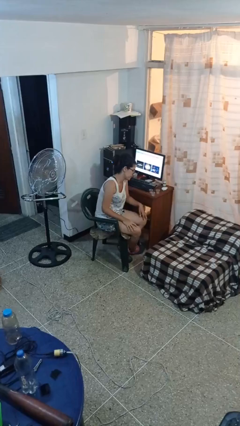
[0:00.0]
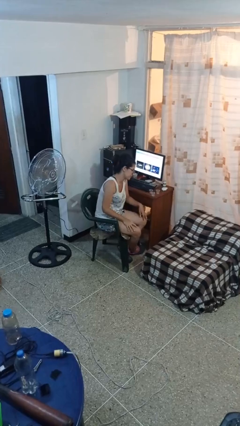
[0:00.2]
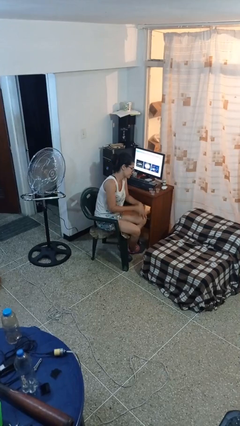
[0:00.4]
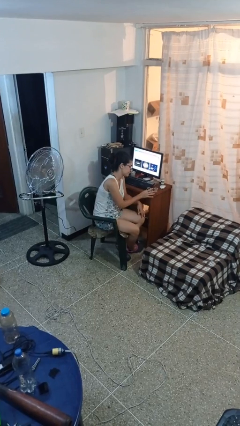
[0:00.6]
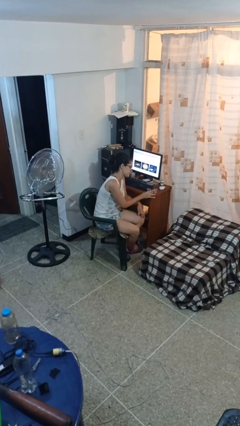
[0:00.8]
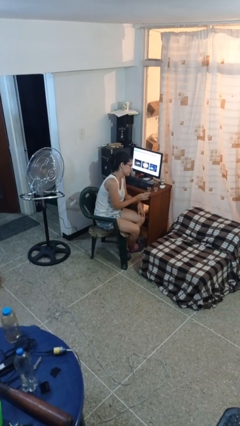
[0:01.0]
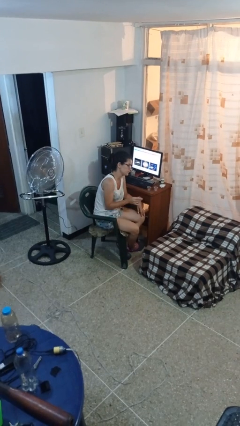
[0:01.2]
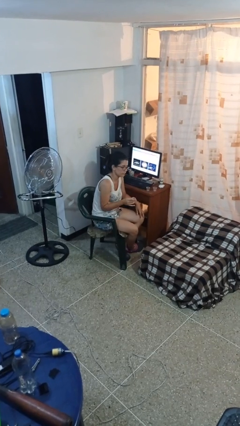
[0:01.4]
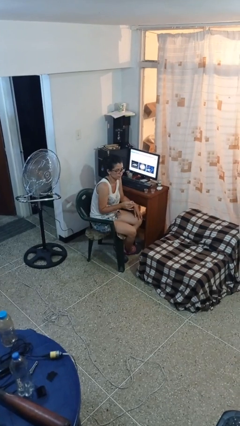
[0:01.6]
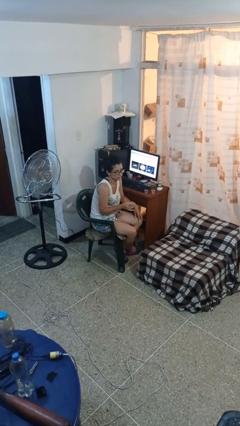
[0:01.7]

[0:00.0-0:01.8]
person picks up object from table

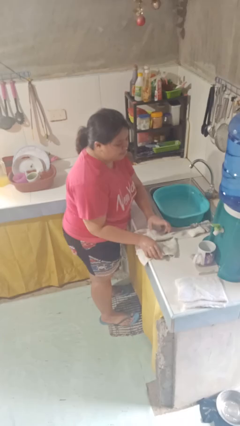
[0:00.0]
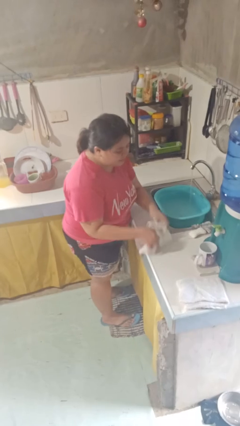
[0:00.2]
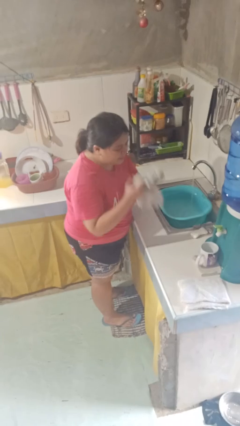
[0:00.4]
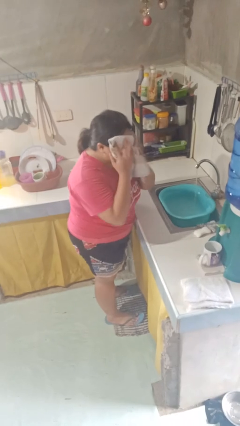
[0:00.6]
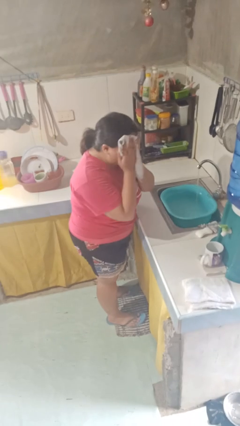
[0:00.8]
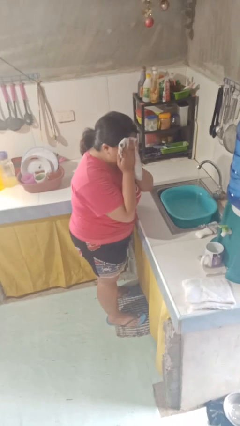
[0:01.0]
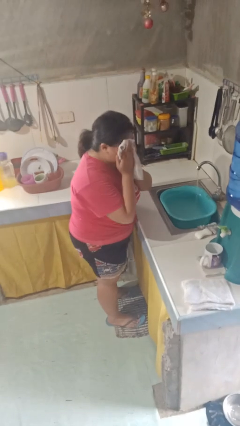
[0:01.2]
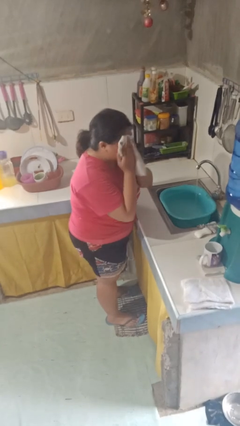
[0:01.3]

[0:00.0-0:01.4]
person dries face with towel

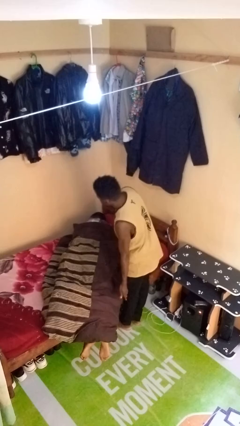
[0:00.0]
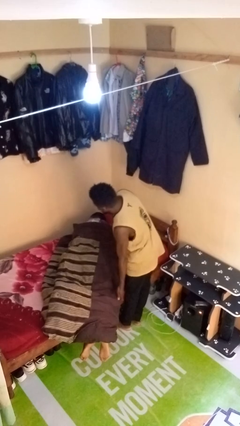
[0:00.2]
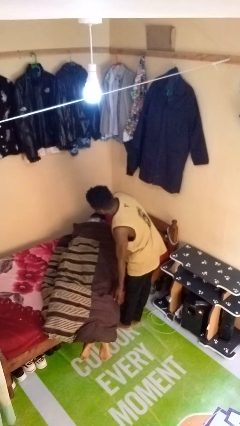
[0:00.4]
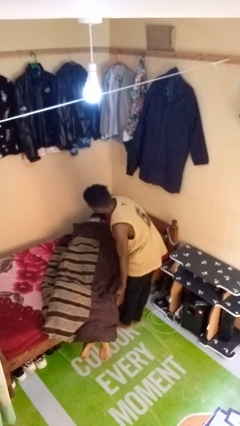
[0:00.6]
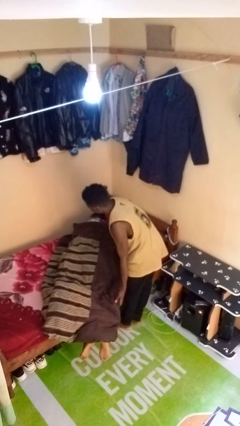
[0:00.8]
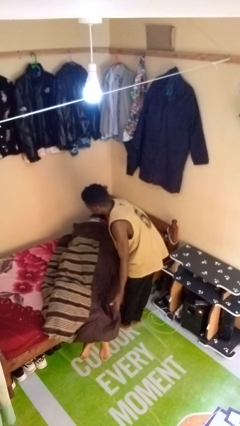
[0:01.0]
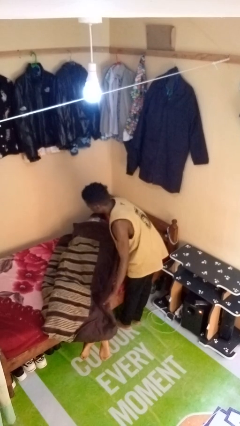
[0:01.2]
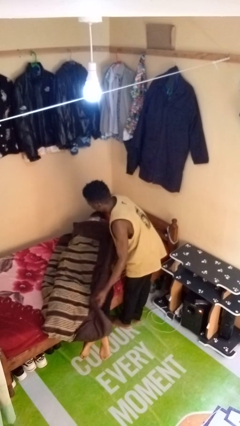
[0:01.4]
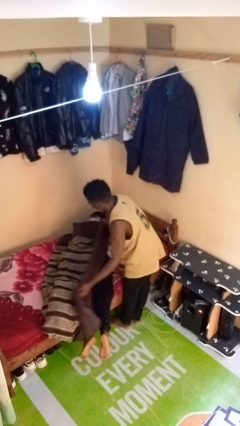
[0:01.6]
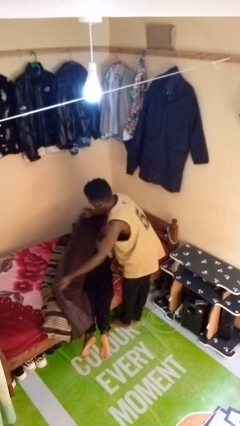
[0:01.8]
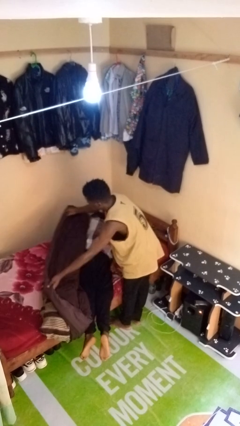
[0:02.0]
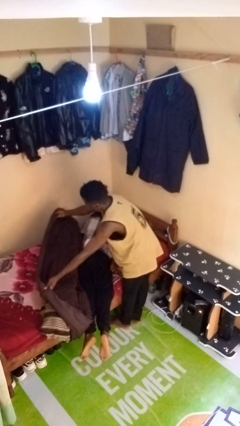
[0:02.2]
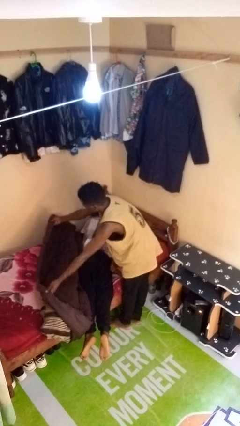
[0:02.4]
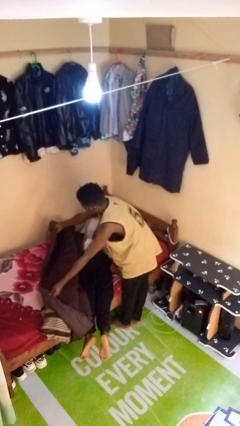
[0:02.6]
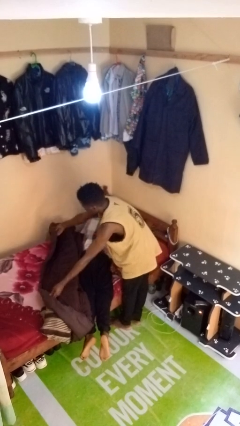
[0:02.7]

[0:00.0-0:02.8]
person uncovers friend with blanket

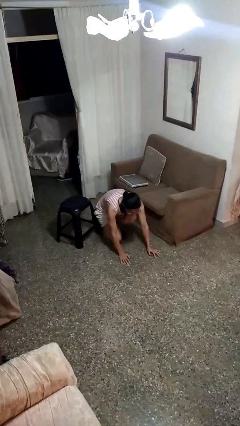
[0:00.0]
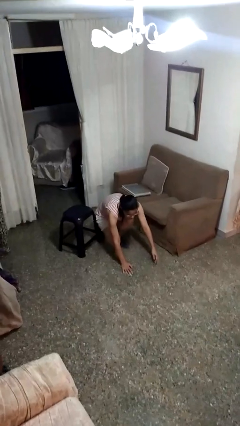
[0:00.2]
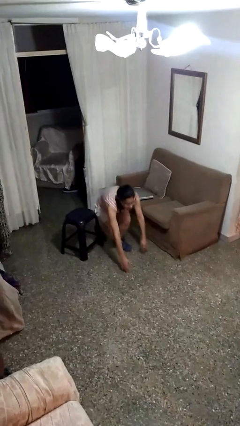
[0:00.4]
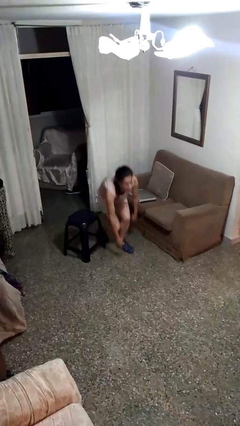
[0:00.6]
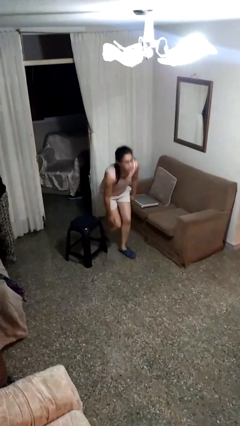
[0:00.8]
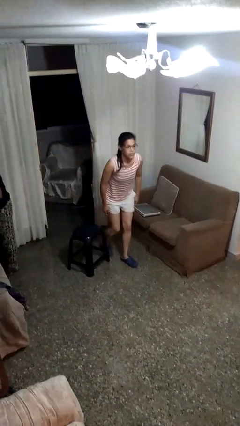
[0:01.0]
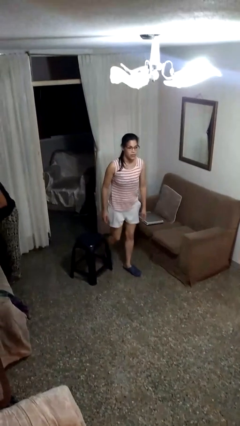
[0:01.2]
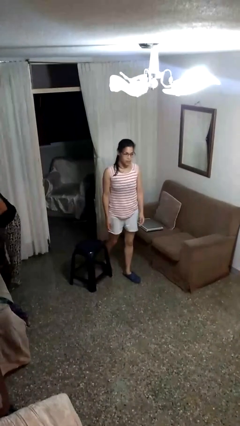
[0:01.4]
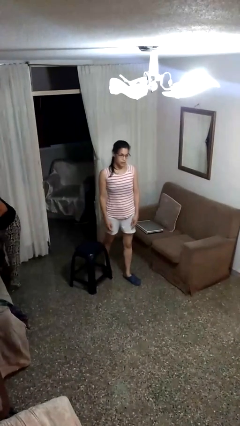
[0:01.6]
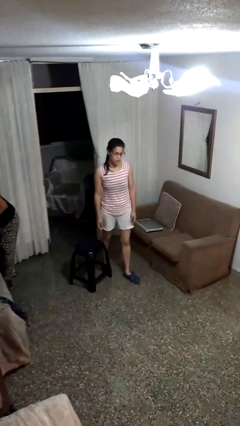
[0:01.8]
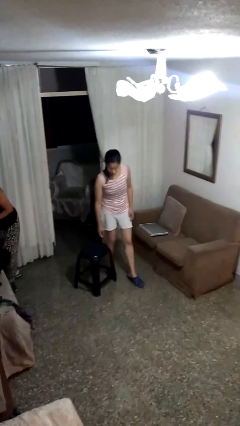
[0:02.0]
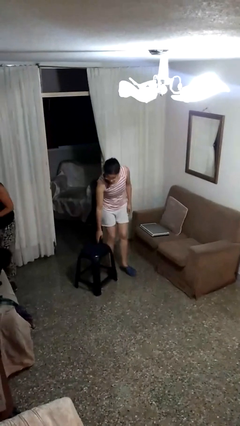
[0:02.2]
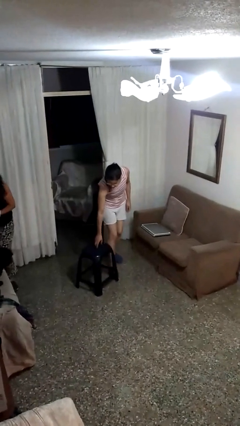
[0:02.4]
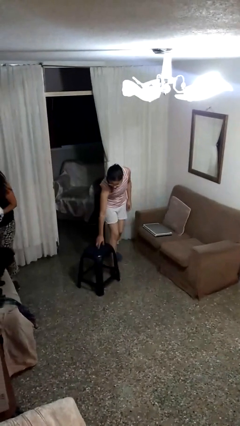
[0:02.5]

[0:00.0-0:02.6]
person stands up from floor

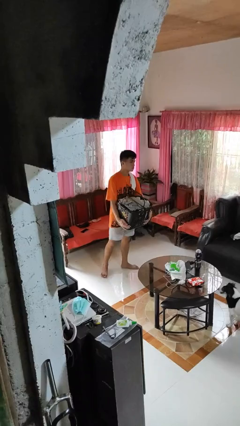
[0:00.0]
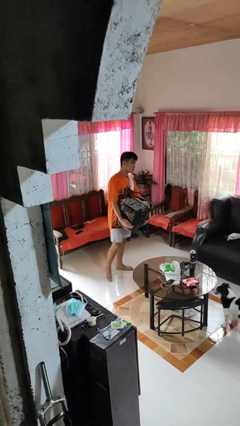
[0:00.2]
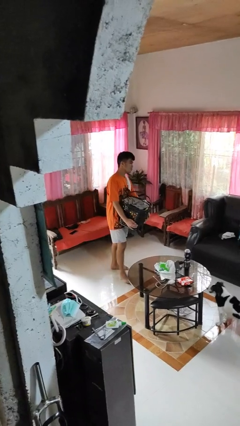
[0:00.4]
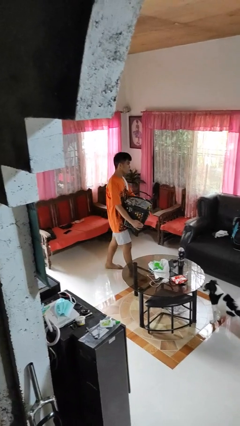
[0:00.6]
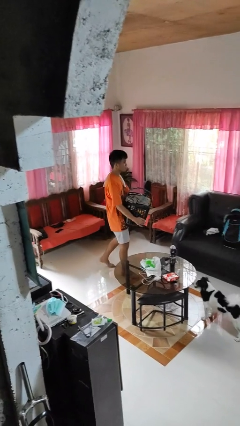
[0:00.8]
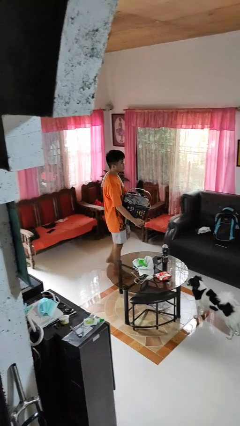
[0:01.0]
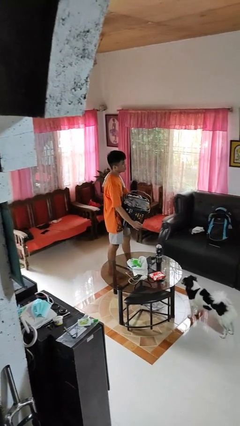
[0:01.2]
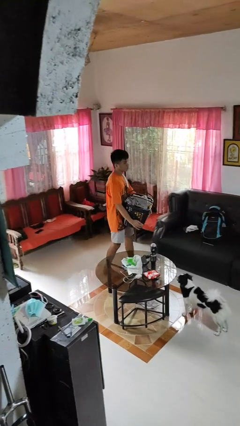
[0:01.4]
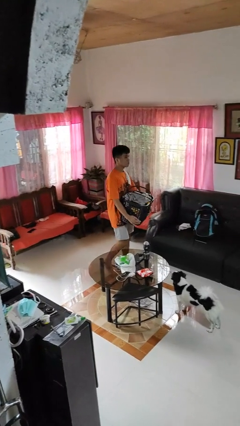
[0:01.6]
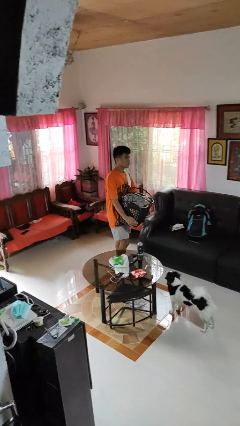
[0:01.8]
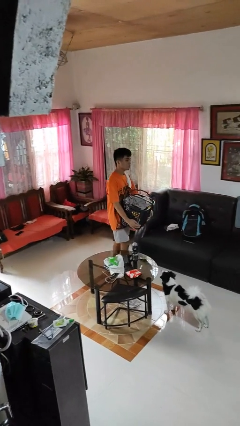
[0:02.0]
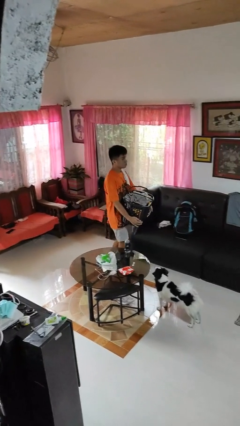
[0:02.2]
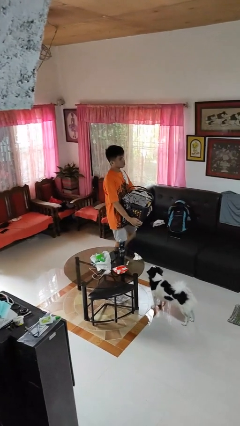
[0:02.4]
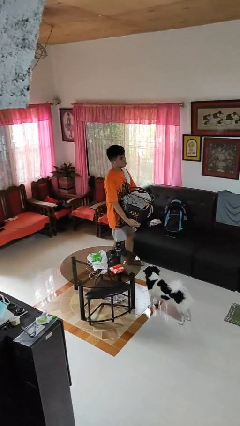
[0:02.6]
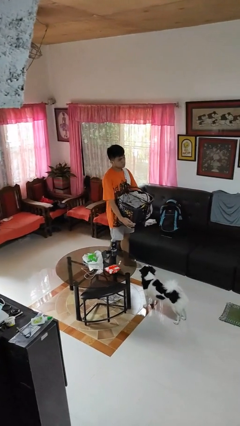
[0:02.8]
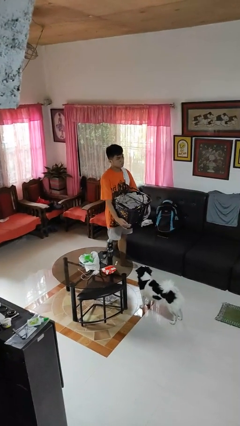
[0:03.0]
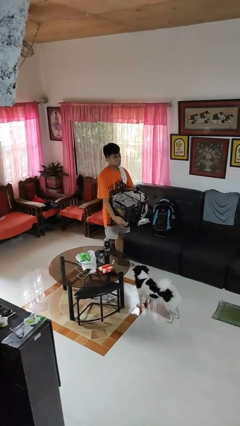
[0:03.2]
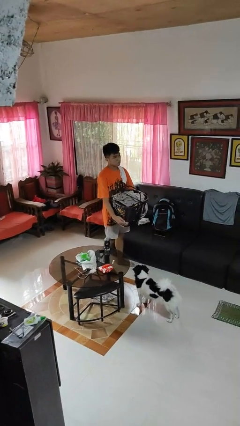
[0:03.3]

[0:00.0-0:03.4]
person carries laundry basket

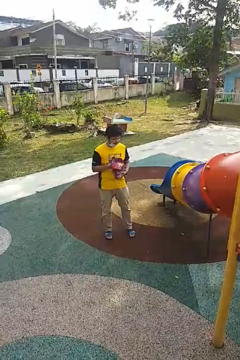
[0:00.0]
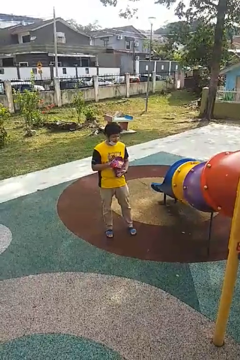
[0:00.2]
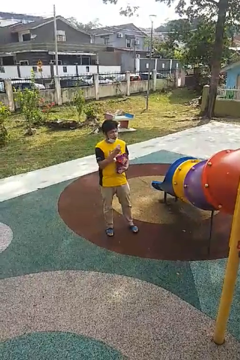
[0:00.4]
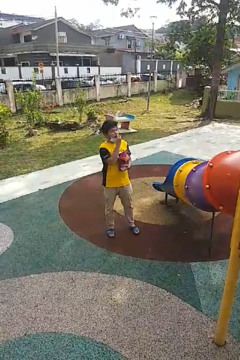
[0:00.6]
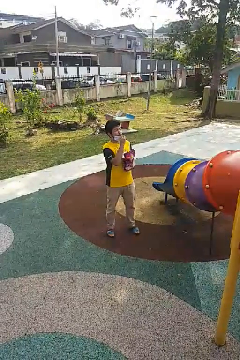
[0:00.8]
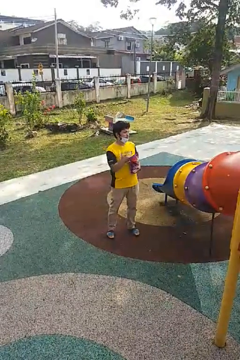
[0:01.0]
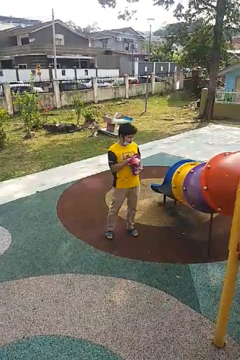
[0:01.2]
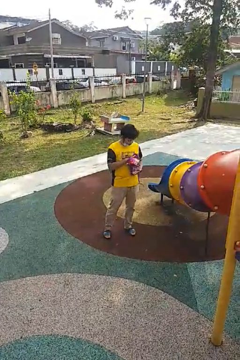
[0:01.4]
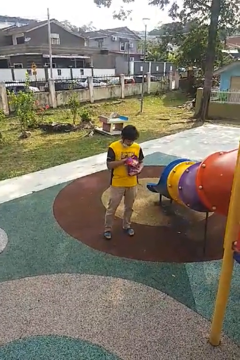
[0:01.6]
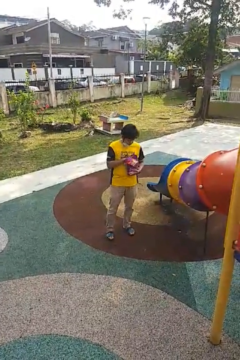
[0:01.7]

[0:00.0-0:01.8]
person eats snack from bag

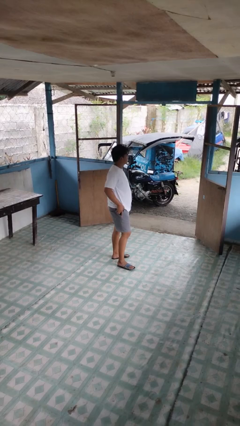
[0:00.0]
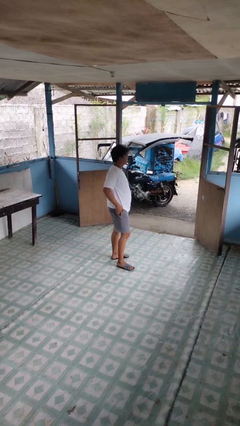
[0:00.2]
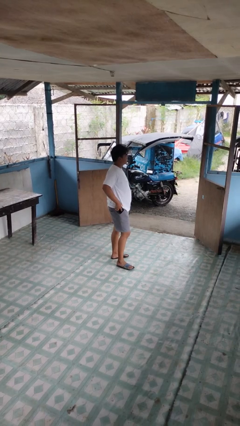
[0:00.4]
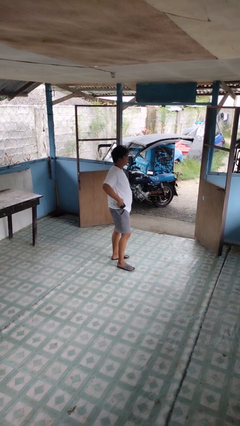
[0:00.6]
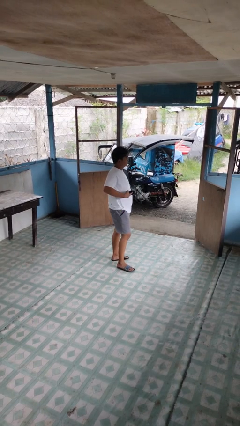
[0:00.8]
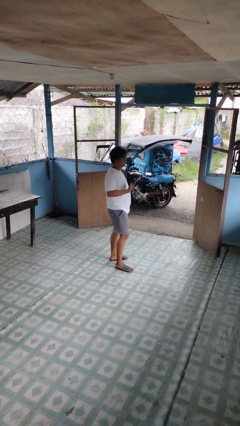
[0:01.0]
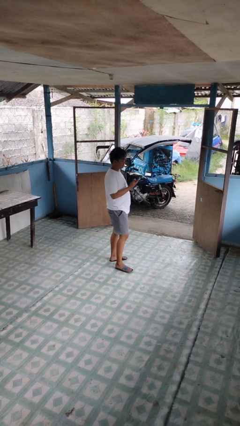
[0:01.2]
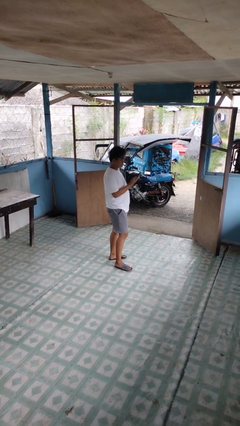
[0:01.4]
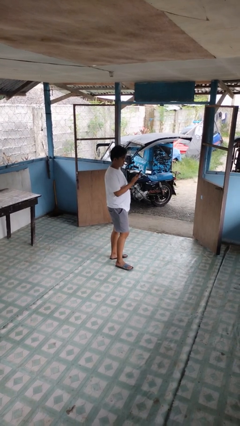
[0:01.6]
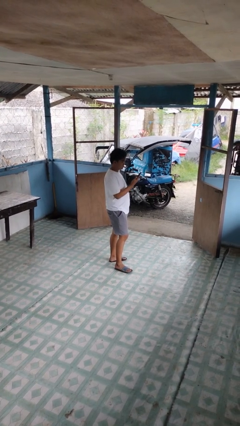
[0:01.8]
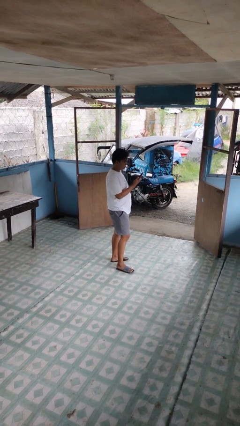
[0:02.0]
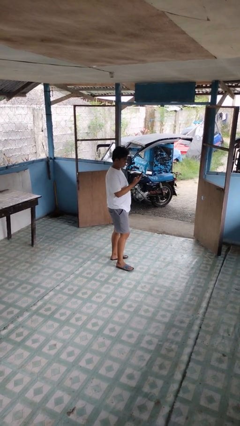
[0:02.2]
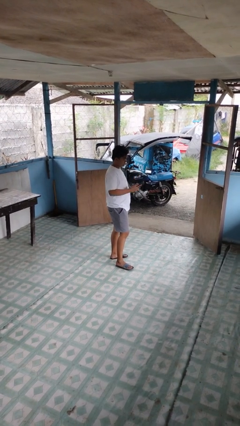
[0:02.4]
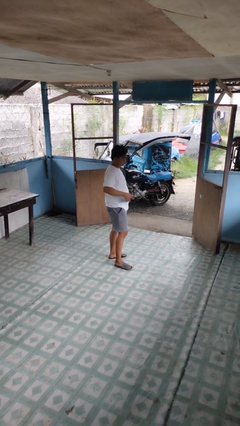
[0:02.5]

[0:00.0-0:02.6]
person takes phone from pocket

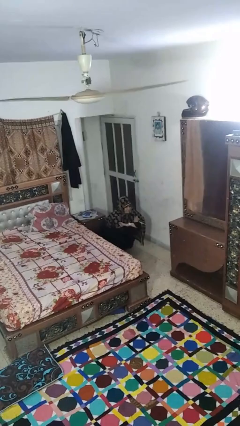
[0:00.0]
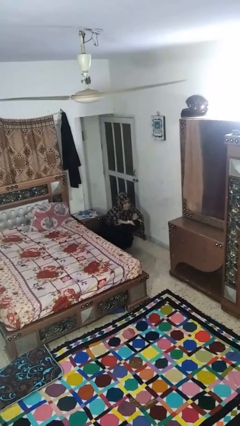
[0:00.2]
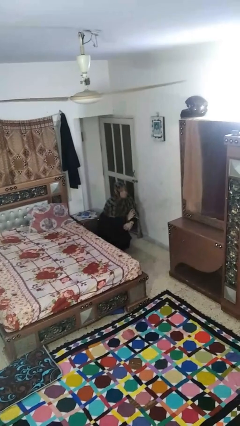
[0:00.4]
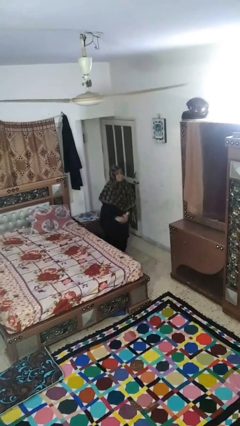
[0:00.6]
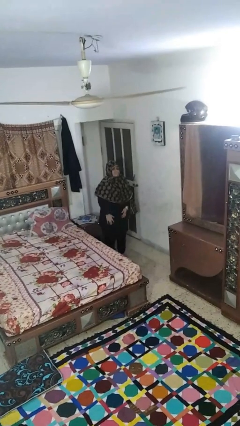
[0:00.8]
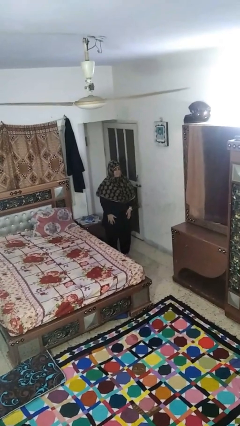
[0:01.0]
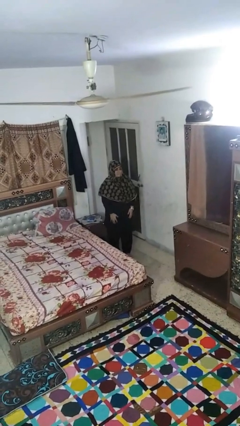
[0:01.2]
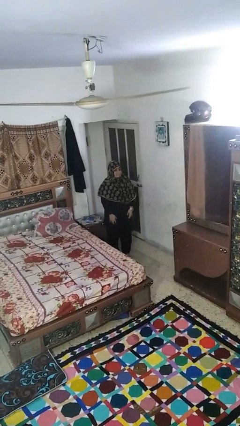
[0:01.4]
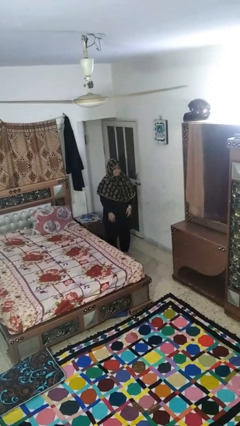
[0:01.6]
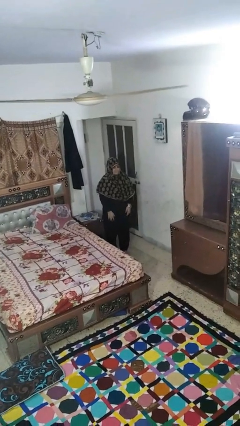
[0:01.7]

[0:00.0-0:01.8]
person stands up
